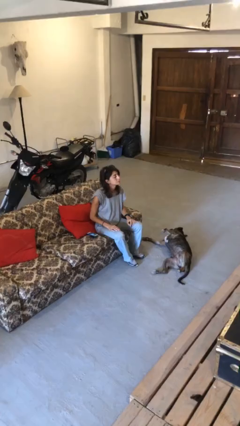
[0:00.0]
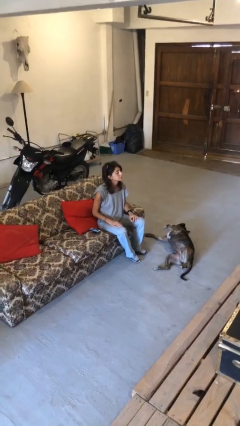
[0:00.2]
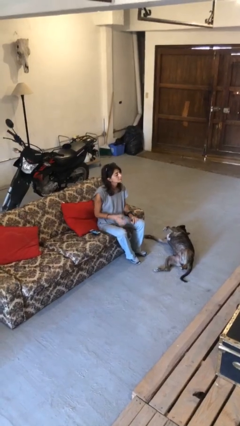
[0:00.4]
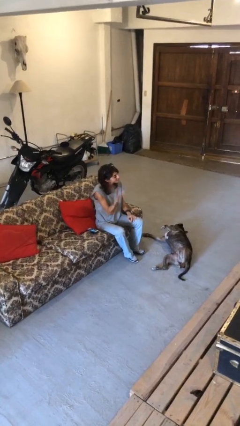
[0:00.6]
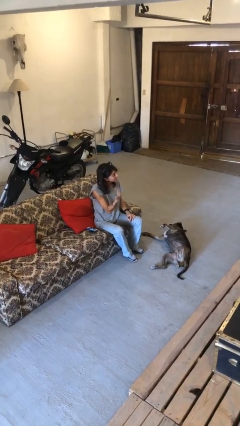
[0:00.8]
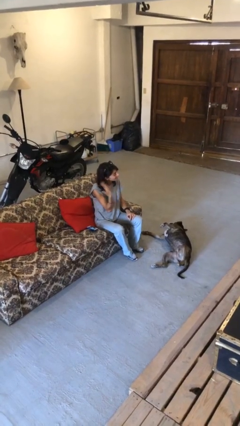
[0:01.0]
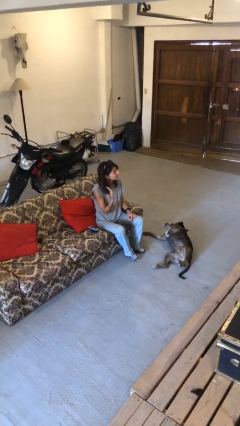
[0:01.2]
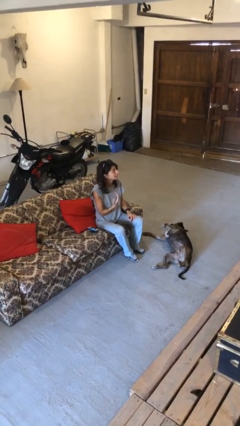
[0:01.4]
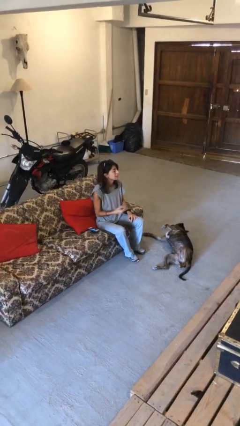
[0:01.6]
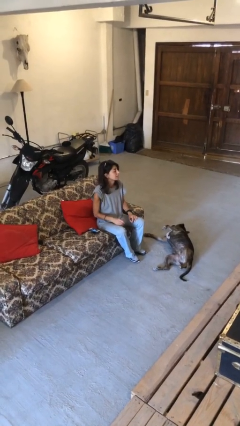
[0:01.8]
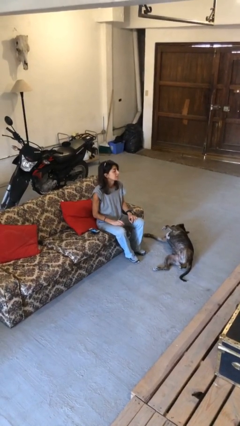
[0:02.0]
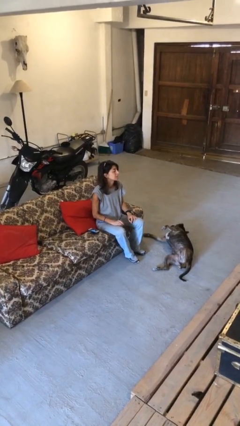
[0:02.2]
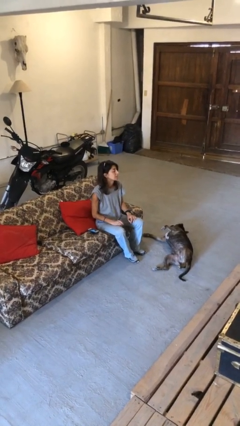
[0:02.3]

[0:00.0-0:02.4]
person gestures come here

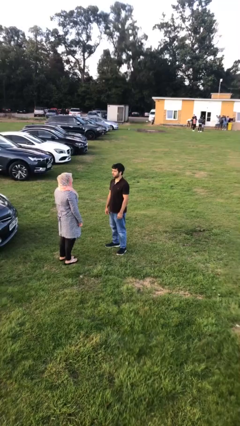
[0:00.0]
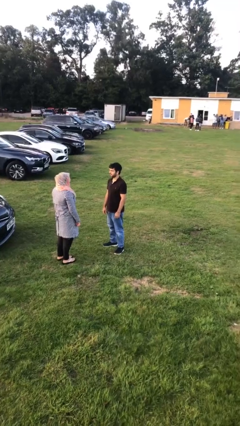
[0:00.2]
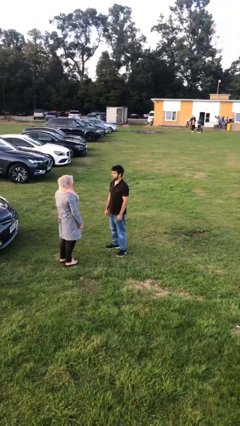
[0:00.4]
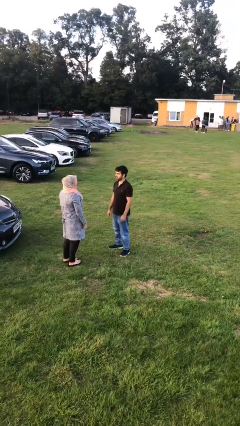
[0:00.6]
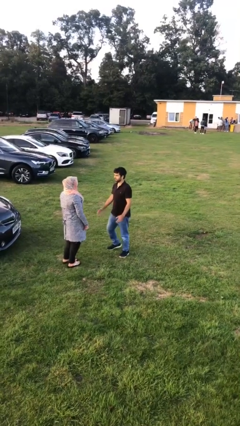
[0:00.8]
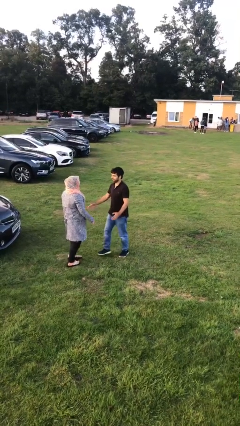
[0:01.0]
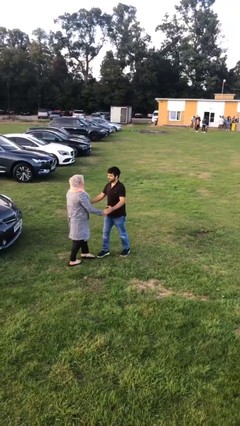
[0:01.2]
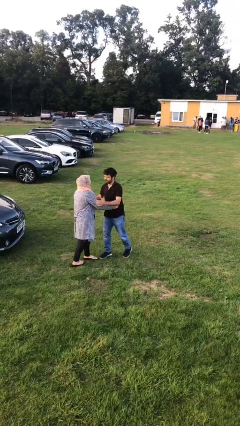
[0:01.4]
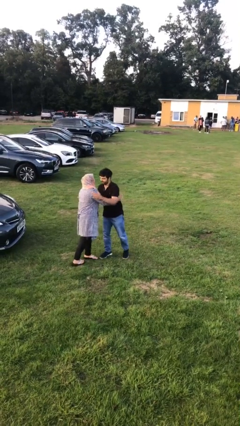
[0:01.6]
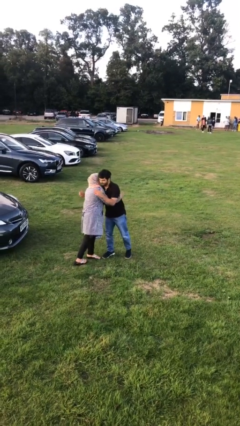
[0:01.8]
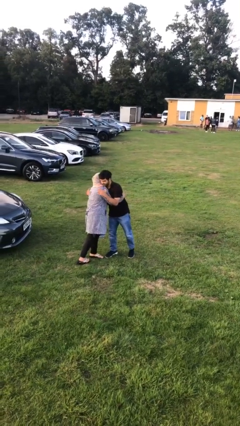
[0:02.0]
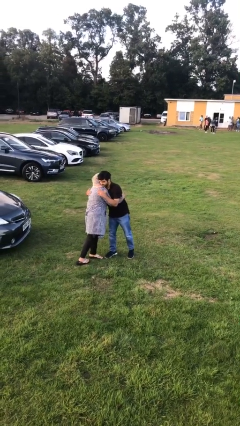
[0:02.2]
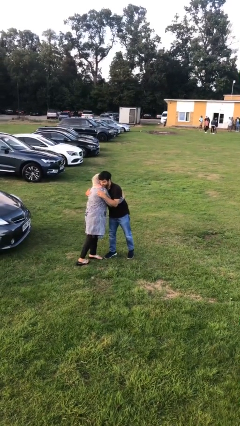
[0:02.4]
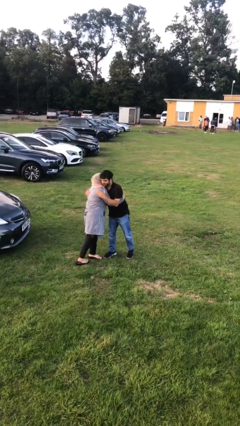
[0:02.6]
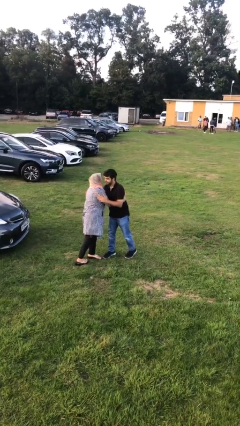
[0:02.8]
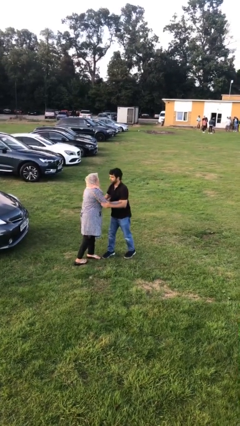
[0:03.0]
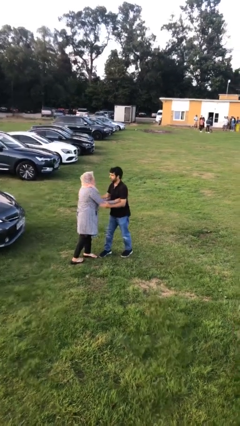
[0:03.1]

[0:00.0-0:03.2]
person embraces person

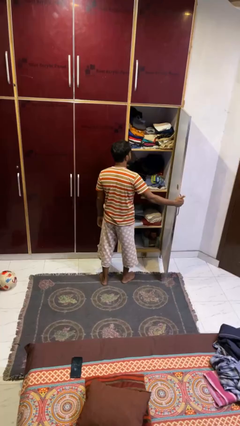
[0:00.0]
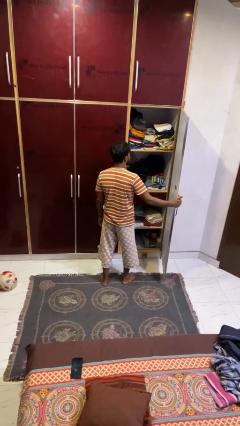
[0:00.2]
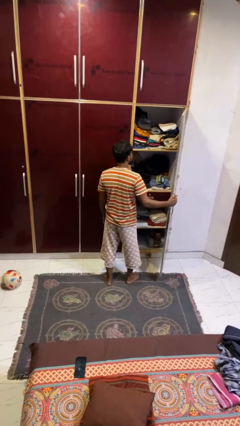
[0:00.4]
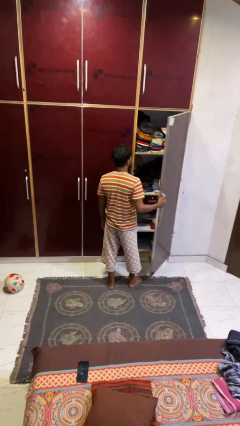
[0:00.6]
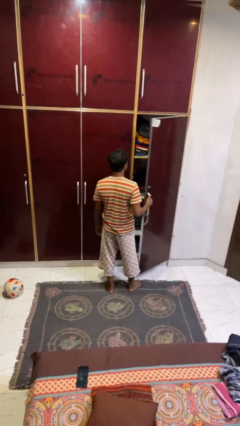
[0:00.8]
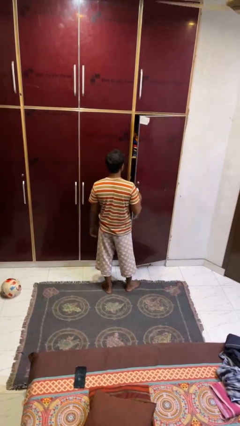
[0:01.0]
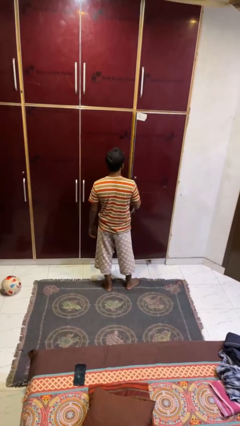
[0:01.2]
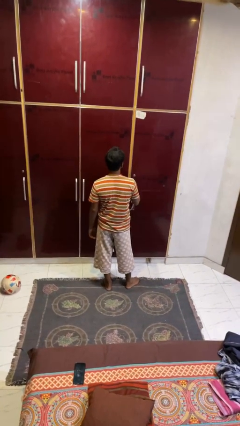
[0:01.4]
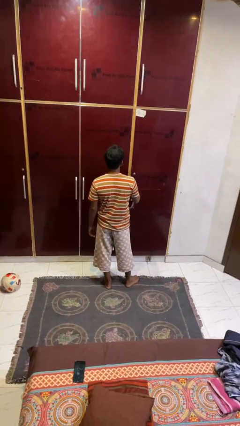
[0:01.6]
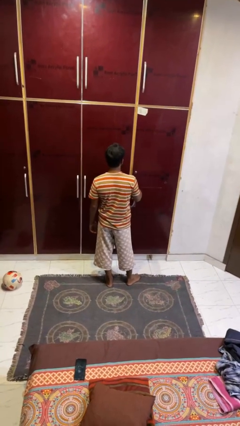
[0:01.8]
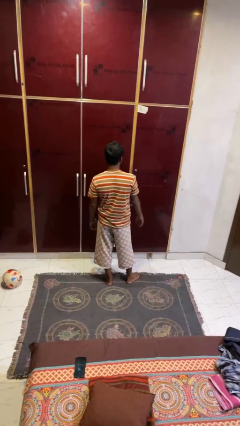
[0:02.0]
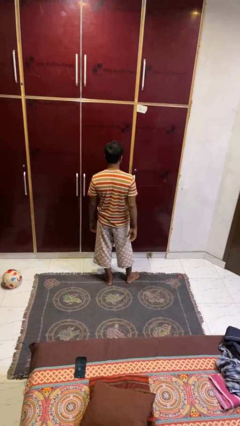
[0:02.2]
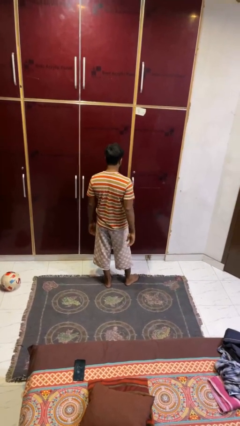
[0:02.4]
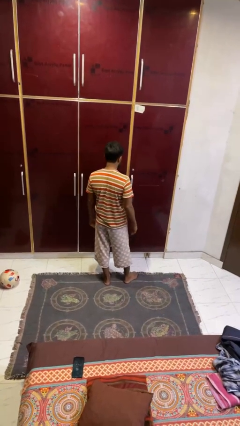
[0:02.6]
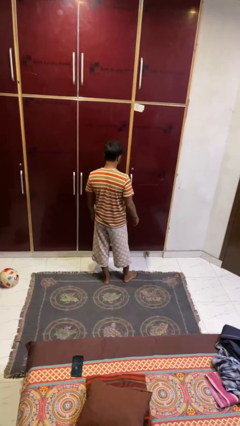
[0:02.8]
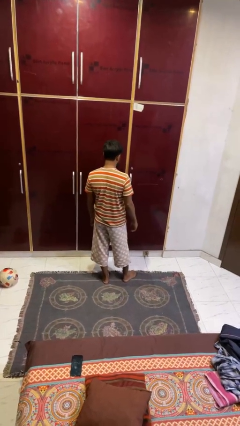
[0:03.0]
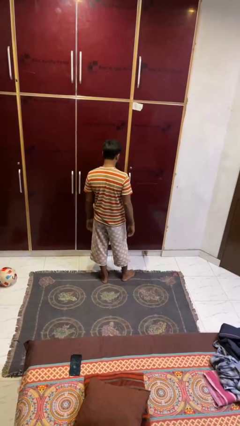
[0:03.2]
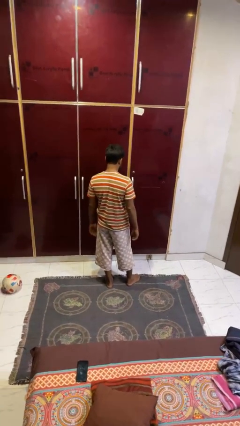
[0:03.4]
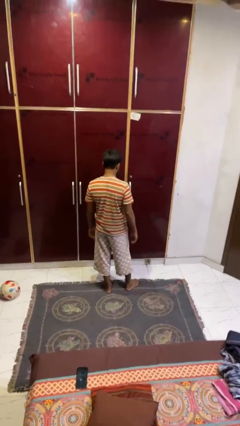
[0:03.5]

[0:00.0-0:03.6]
person closes closet door

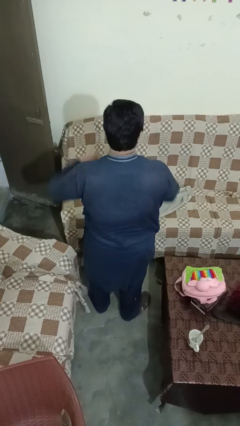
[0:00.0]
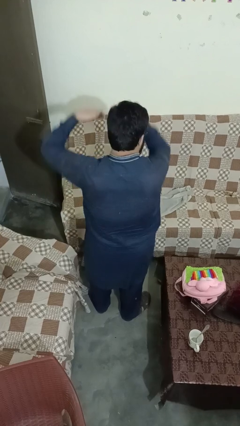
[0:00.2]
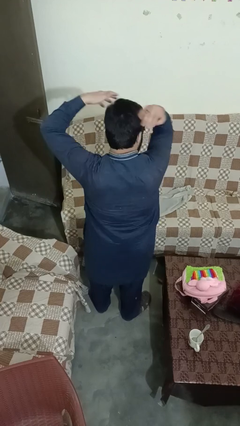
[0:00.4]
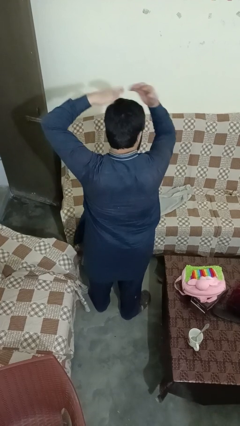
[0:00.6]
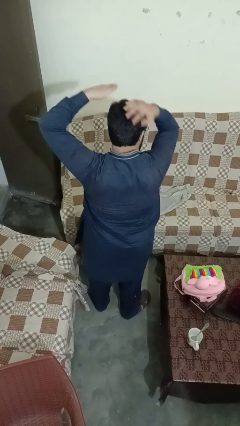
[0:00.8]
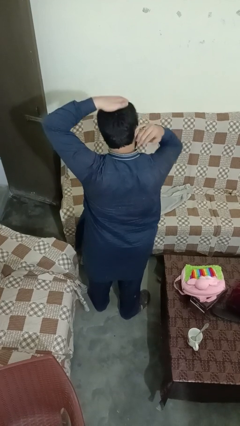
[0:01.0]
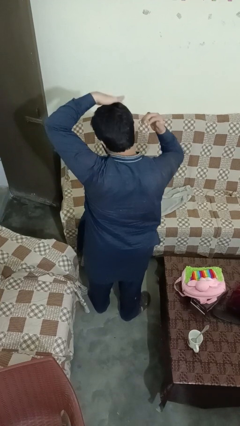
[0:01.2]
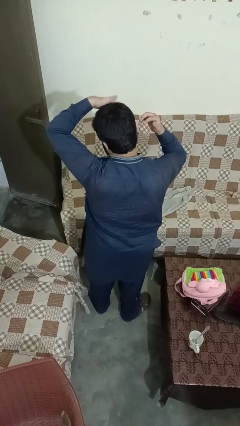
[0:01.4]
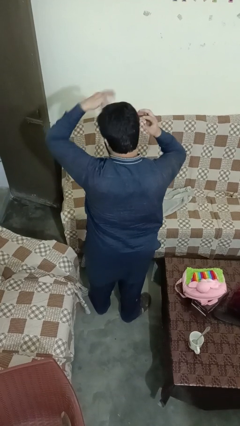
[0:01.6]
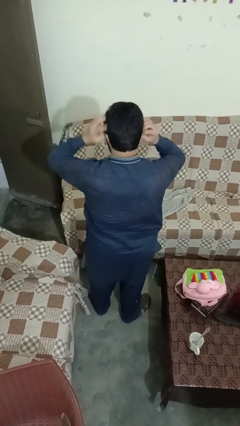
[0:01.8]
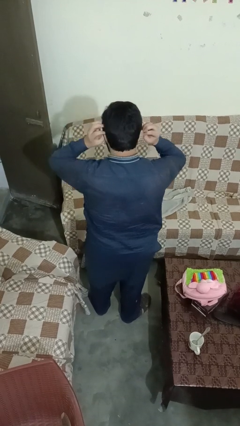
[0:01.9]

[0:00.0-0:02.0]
person strokes hair

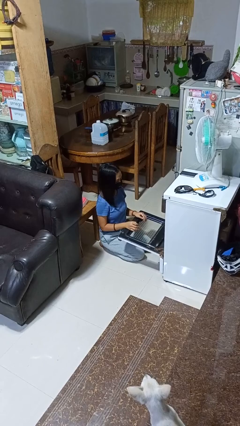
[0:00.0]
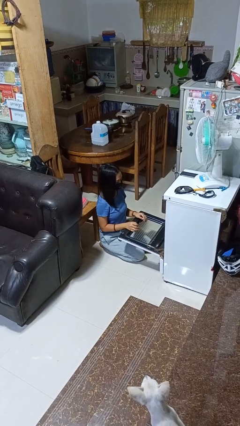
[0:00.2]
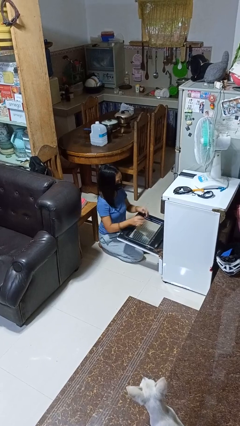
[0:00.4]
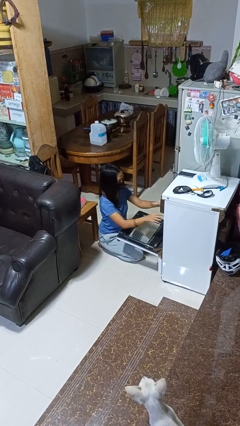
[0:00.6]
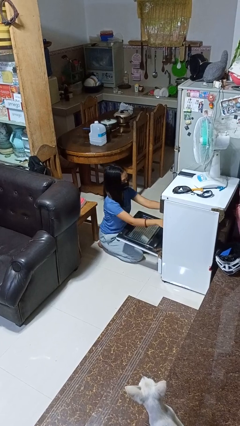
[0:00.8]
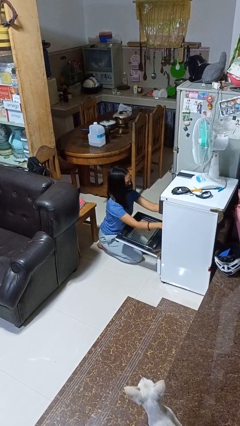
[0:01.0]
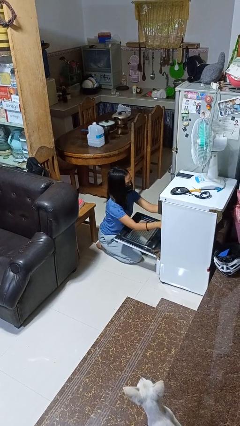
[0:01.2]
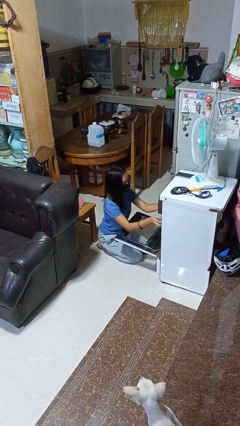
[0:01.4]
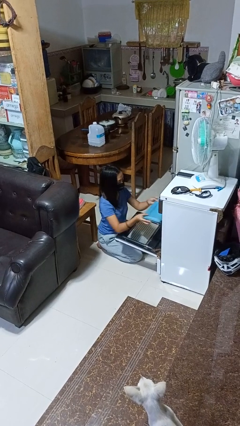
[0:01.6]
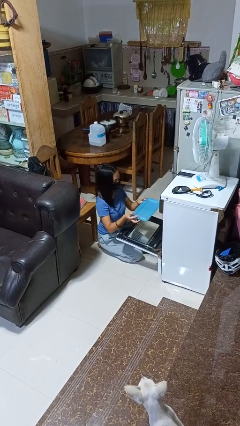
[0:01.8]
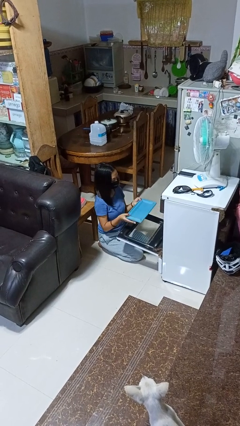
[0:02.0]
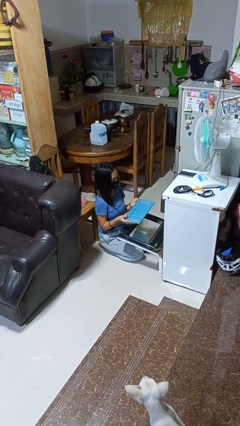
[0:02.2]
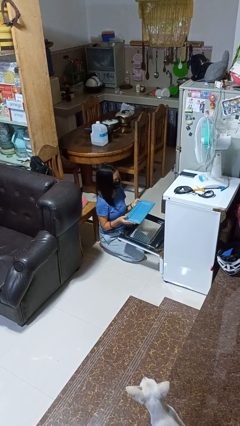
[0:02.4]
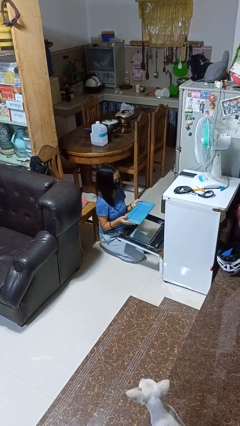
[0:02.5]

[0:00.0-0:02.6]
person takes object from oven

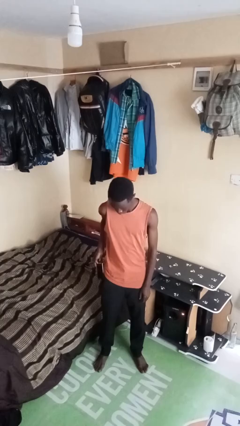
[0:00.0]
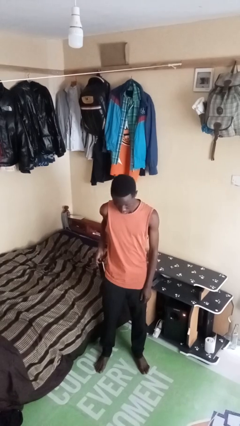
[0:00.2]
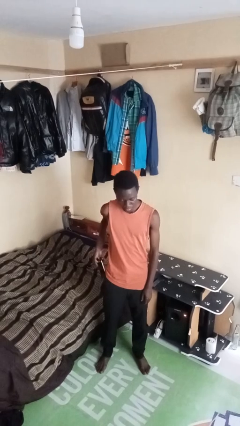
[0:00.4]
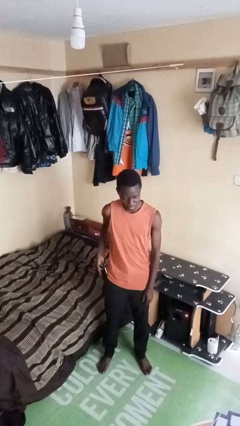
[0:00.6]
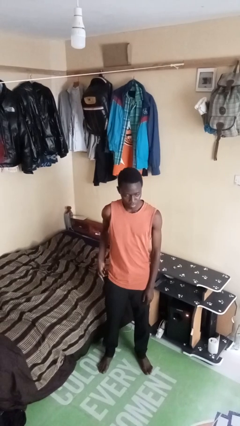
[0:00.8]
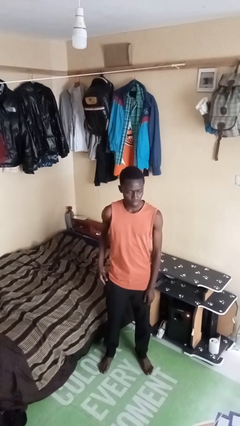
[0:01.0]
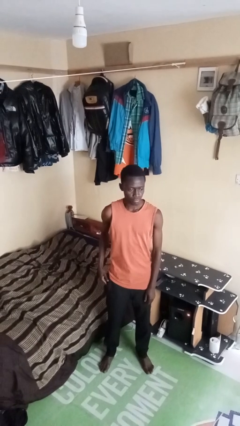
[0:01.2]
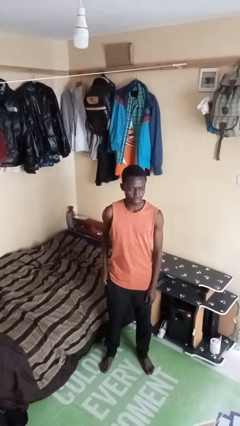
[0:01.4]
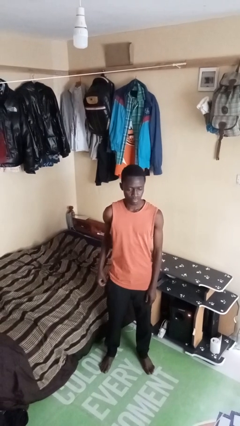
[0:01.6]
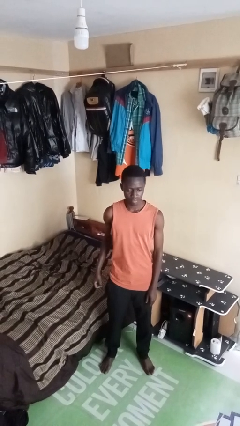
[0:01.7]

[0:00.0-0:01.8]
person puts phone into pocket

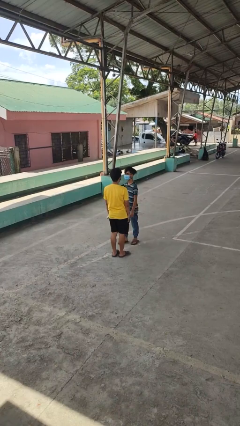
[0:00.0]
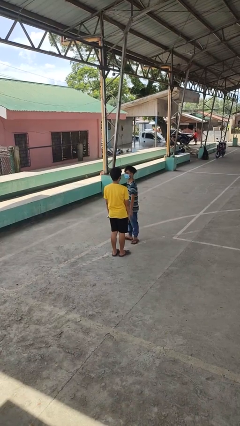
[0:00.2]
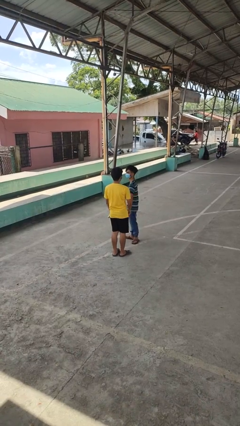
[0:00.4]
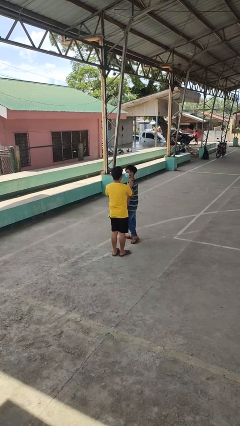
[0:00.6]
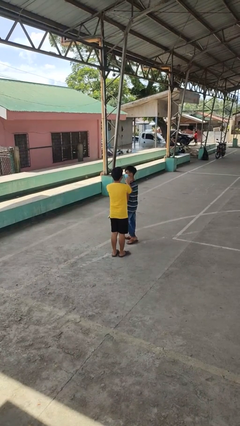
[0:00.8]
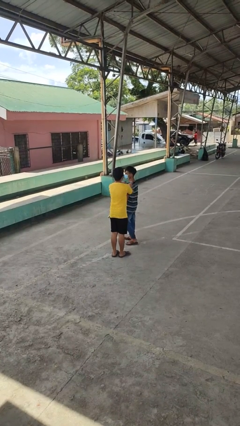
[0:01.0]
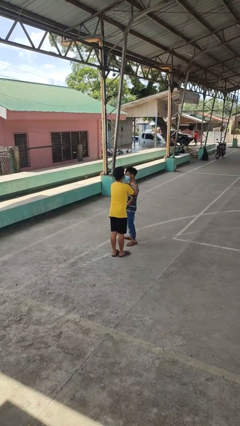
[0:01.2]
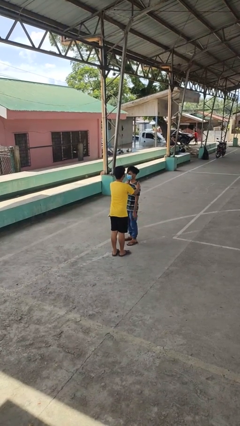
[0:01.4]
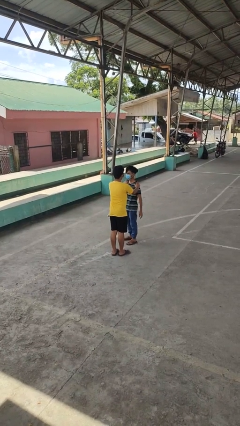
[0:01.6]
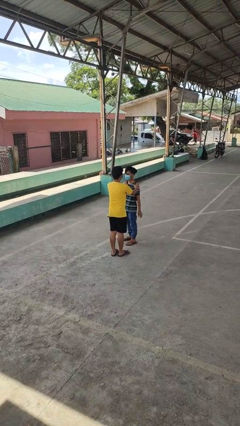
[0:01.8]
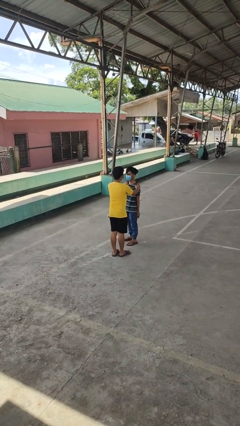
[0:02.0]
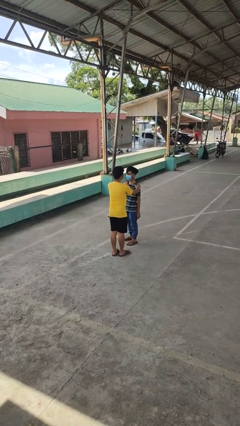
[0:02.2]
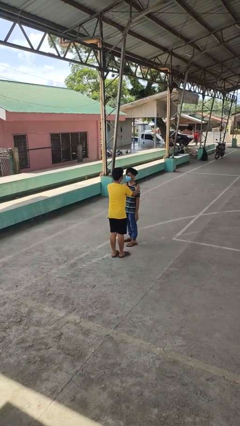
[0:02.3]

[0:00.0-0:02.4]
person grabs person by shoulder
